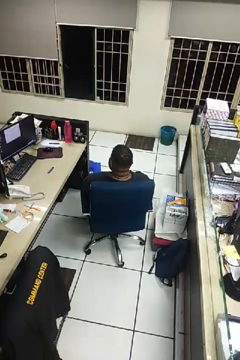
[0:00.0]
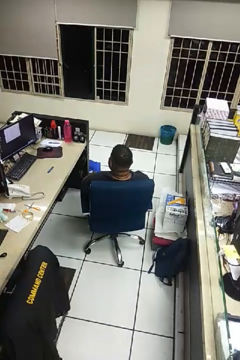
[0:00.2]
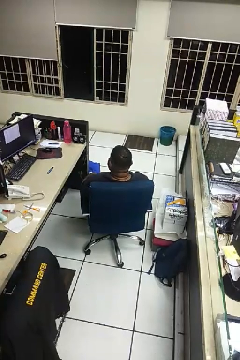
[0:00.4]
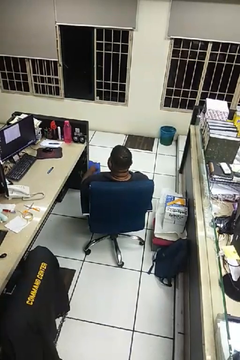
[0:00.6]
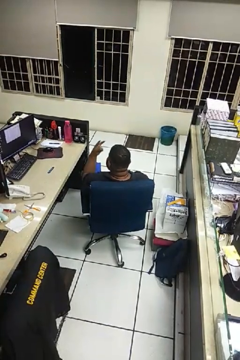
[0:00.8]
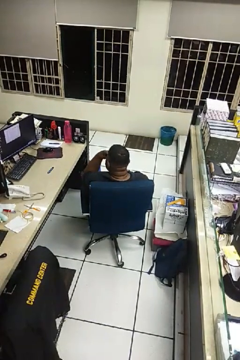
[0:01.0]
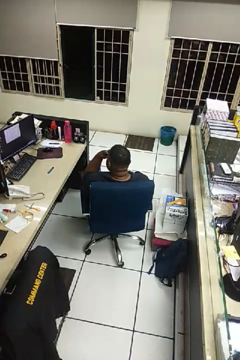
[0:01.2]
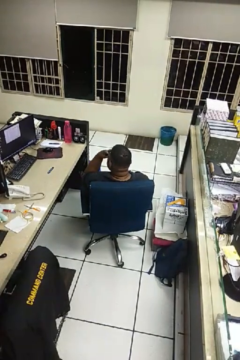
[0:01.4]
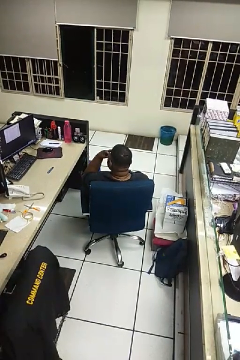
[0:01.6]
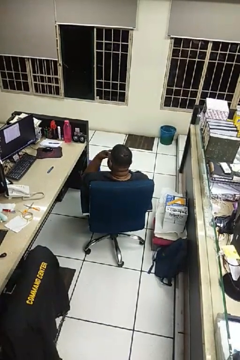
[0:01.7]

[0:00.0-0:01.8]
person gestures watch closely

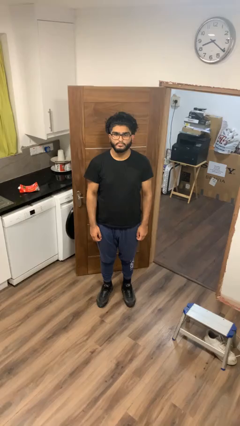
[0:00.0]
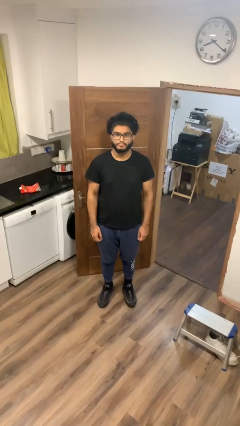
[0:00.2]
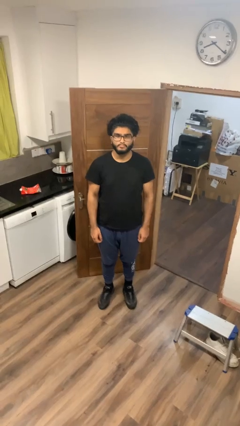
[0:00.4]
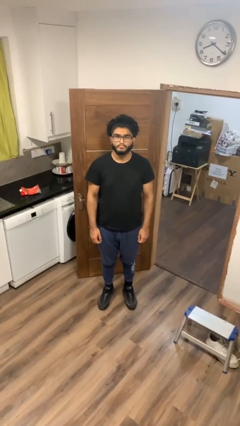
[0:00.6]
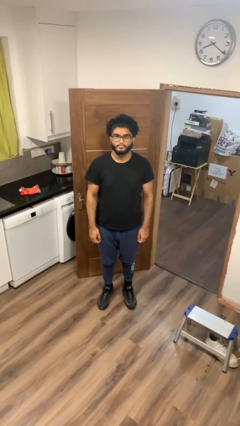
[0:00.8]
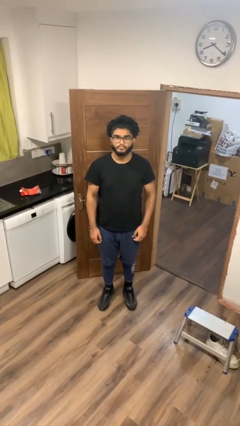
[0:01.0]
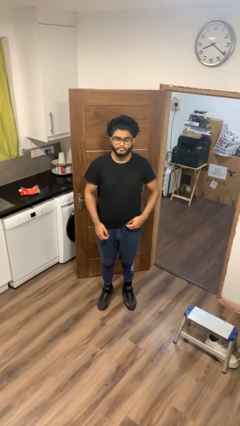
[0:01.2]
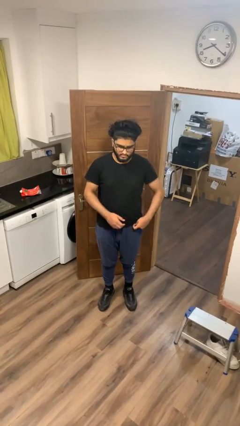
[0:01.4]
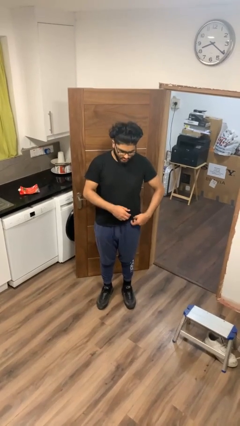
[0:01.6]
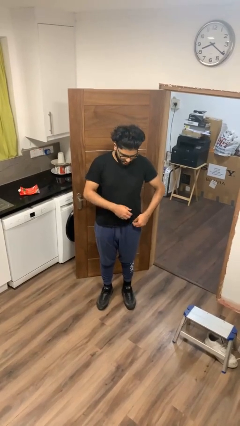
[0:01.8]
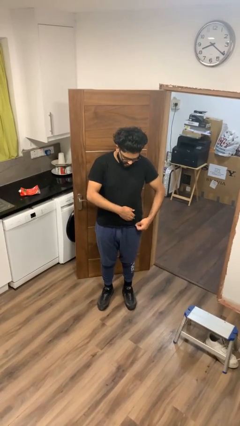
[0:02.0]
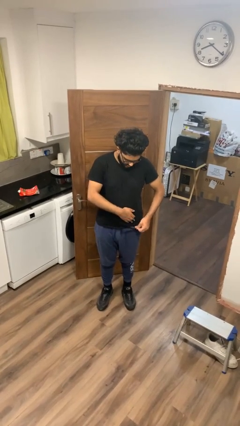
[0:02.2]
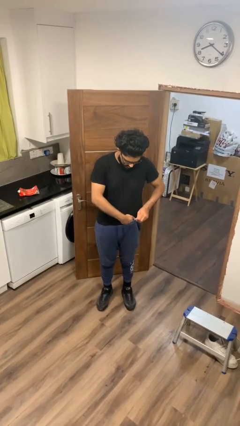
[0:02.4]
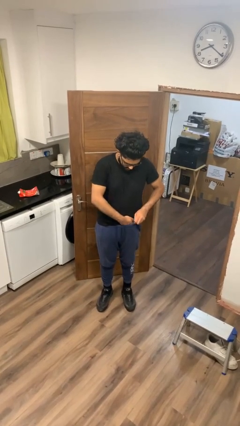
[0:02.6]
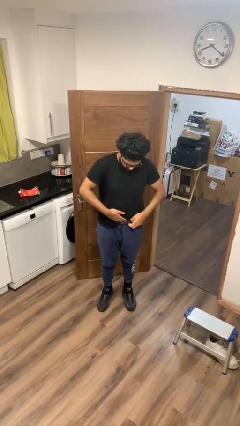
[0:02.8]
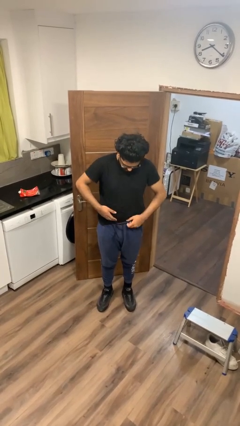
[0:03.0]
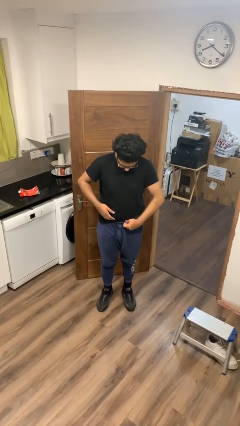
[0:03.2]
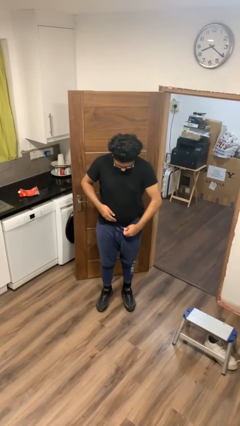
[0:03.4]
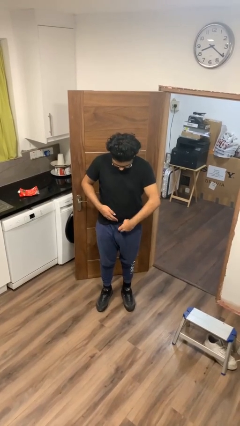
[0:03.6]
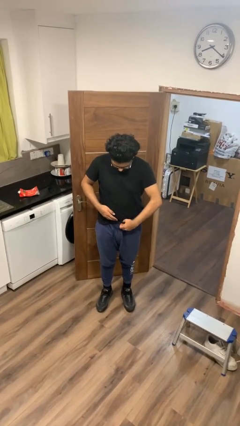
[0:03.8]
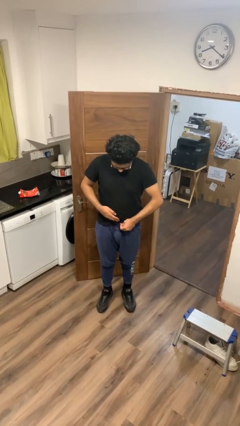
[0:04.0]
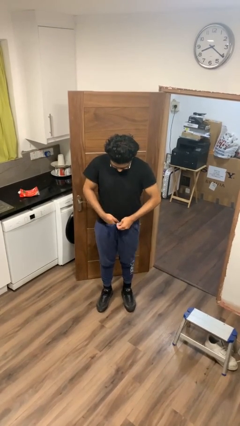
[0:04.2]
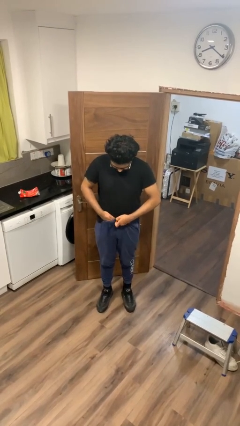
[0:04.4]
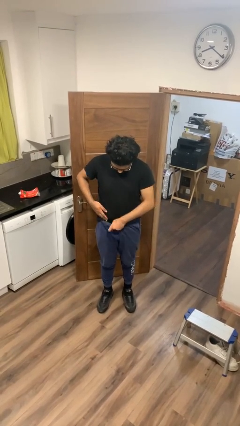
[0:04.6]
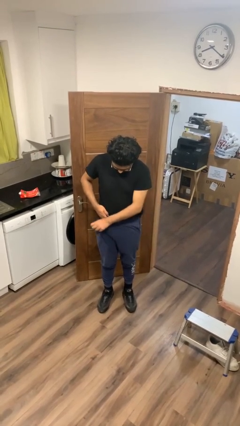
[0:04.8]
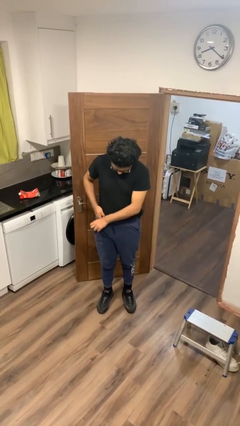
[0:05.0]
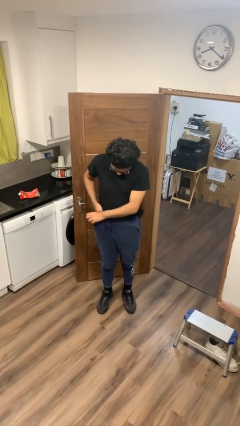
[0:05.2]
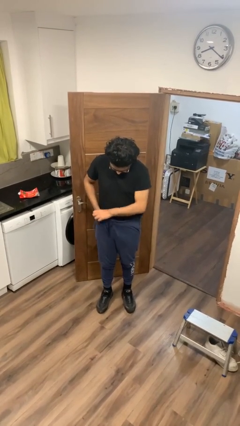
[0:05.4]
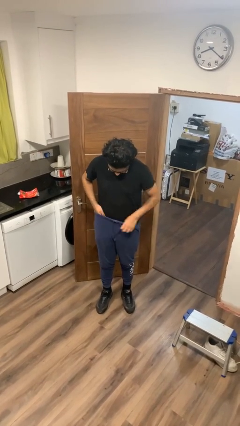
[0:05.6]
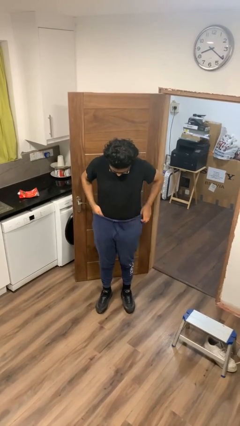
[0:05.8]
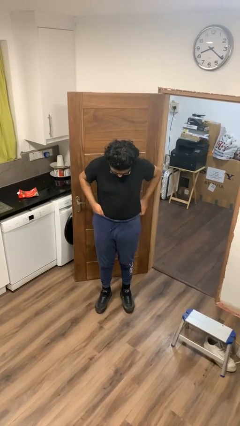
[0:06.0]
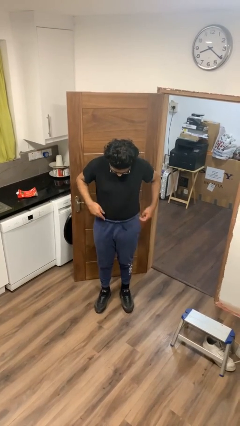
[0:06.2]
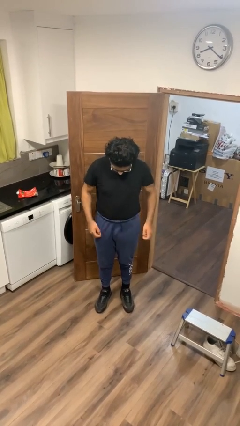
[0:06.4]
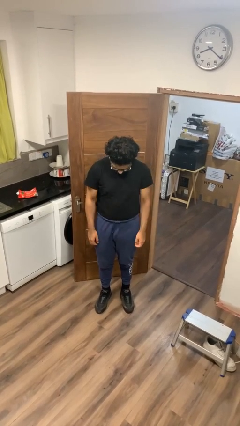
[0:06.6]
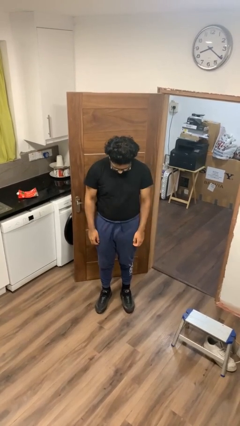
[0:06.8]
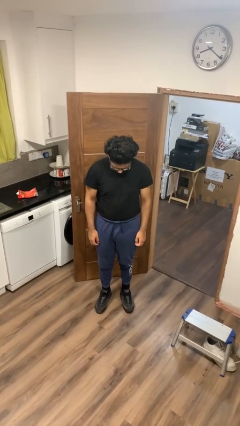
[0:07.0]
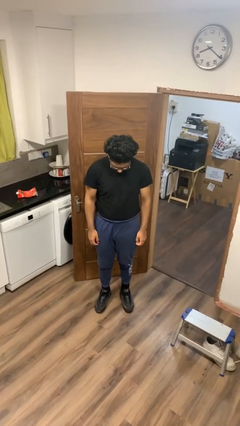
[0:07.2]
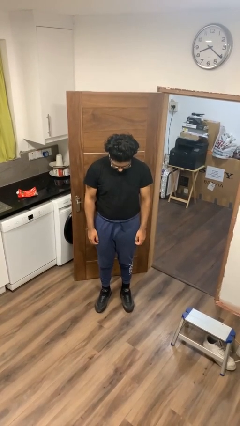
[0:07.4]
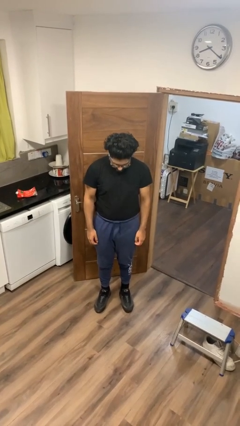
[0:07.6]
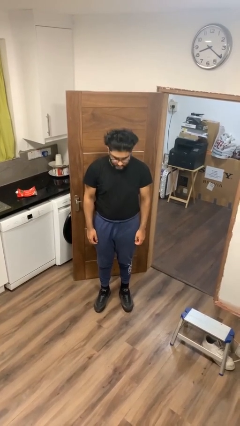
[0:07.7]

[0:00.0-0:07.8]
person tucks in shirt

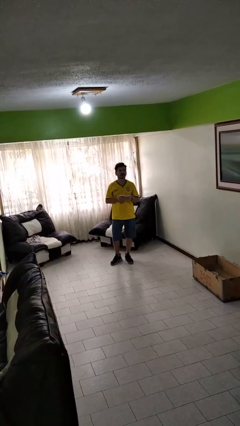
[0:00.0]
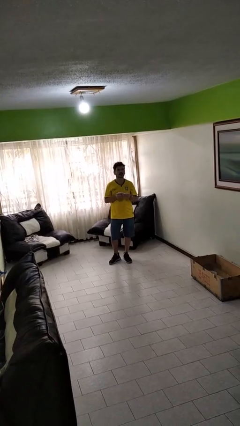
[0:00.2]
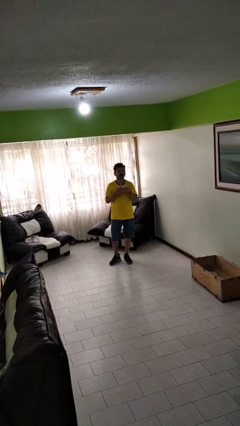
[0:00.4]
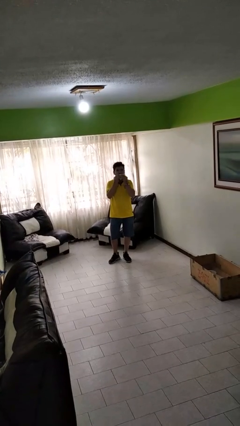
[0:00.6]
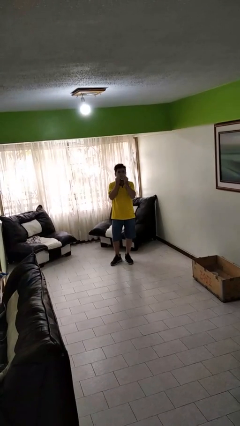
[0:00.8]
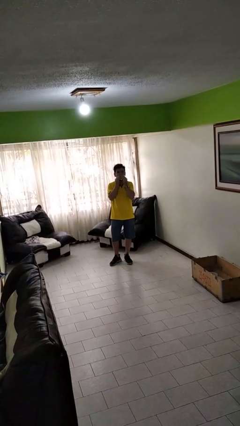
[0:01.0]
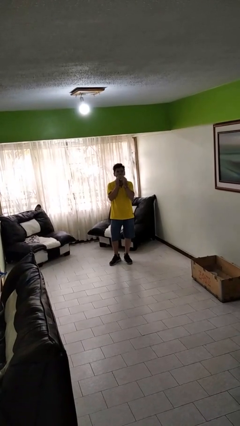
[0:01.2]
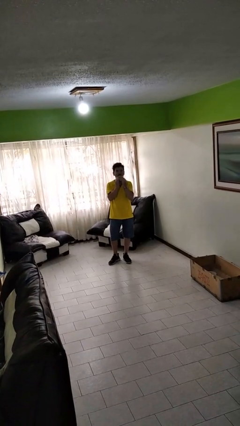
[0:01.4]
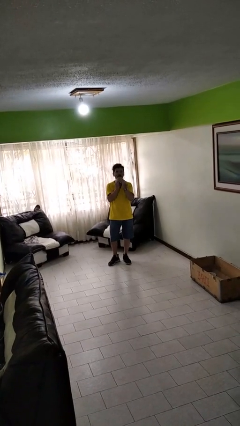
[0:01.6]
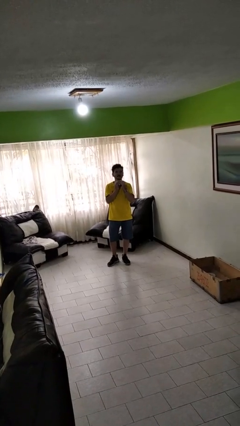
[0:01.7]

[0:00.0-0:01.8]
person wipes mouth with napkin

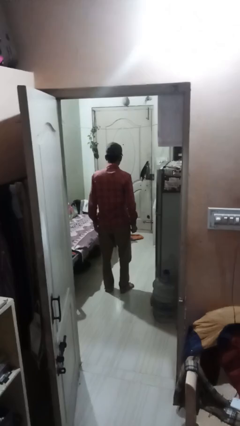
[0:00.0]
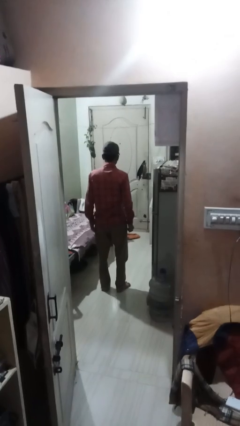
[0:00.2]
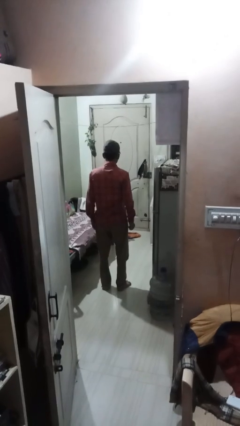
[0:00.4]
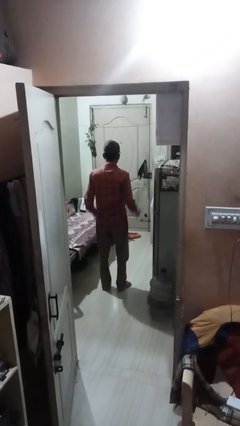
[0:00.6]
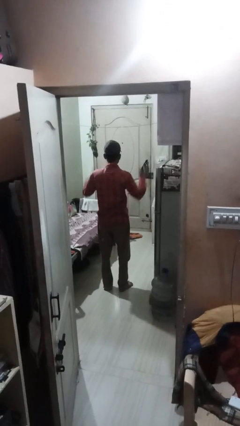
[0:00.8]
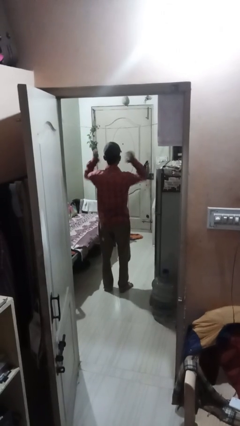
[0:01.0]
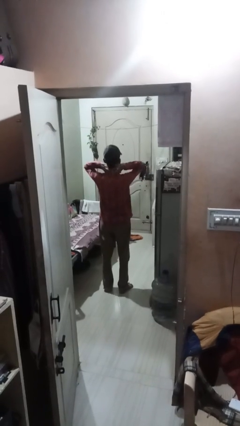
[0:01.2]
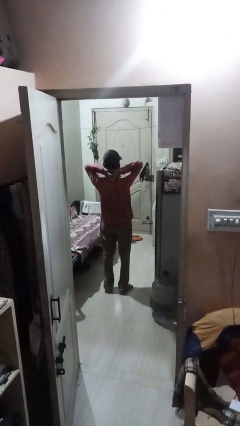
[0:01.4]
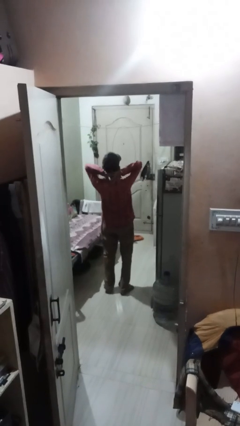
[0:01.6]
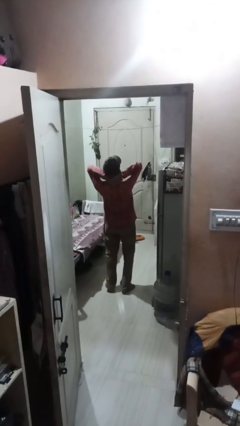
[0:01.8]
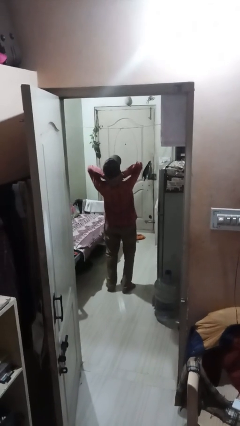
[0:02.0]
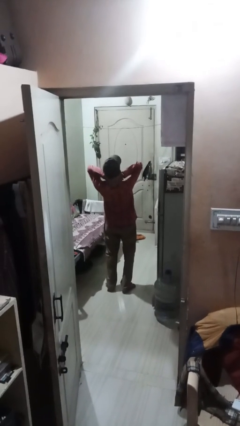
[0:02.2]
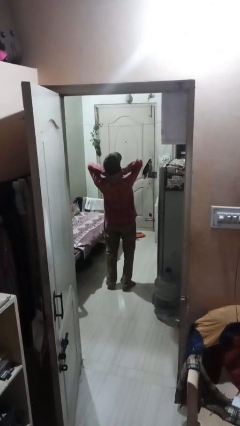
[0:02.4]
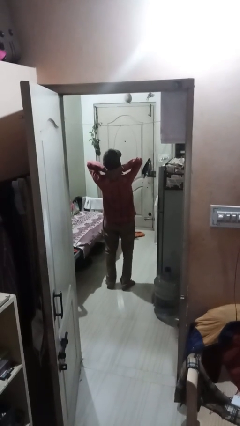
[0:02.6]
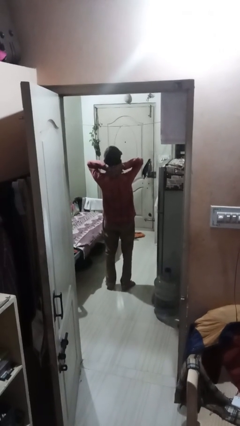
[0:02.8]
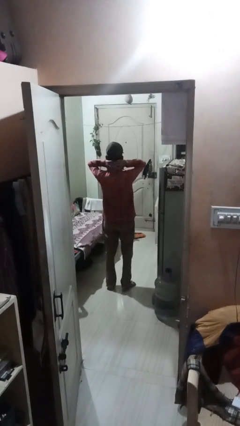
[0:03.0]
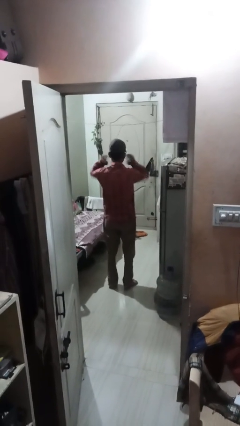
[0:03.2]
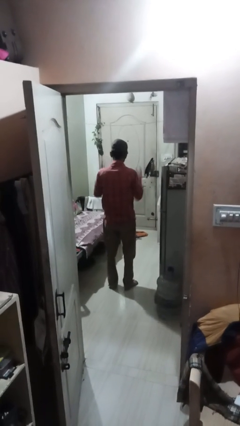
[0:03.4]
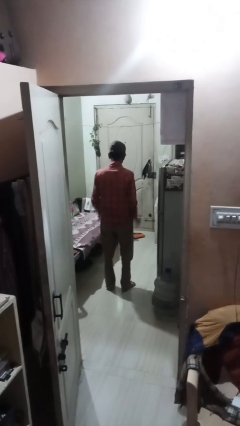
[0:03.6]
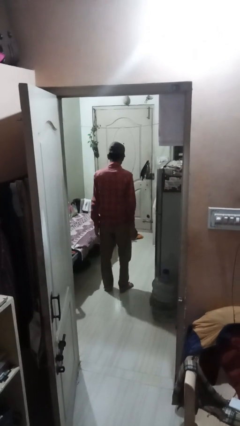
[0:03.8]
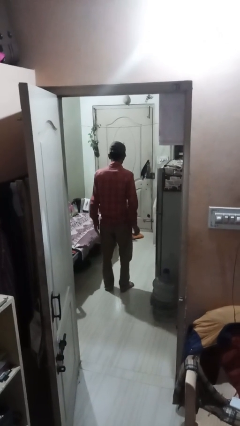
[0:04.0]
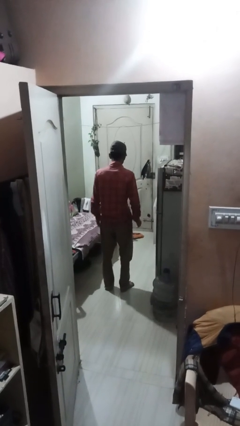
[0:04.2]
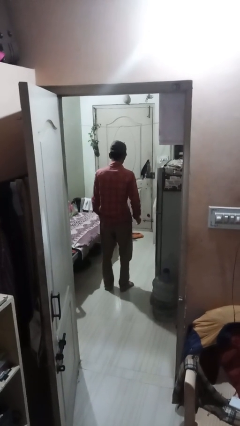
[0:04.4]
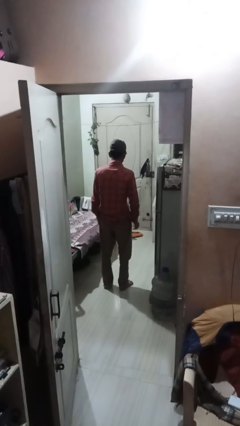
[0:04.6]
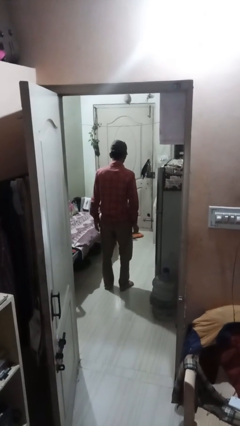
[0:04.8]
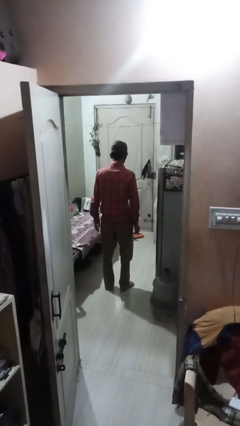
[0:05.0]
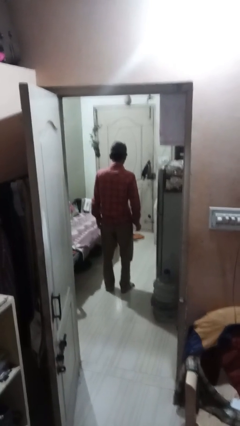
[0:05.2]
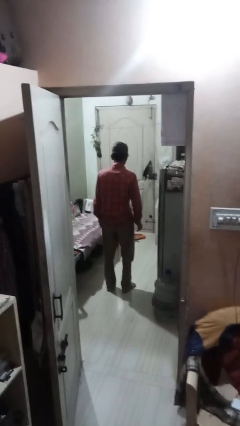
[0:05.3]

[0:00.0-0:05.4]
person stretches arms over head

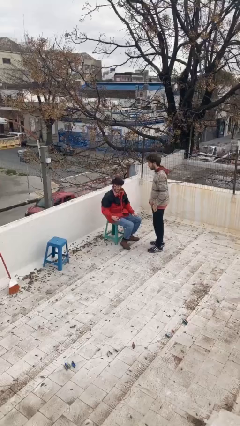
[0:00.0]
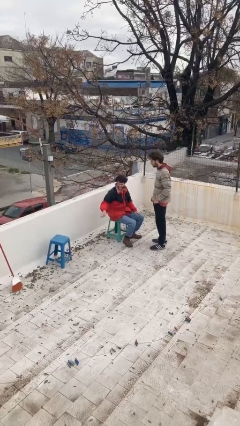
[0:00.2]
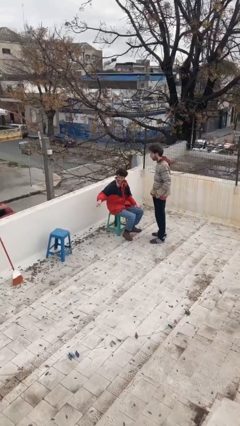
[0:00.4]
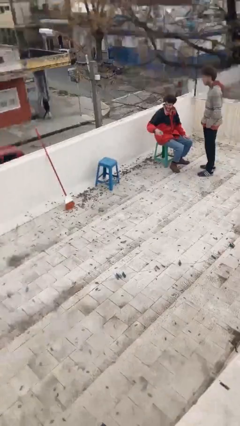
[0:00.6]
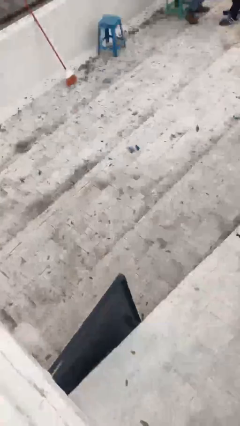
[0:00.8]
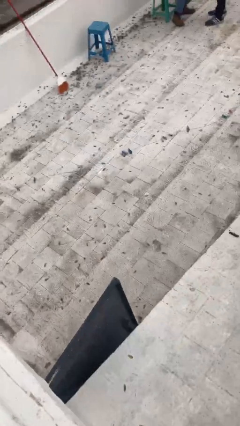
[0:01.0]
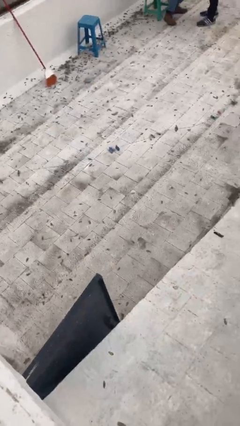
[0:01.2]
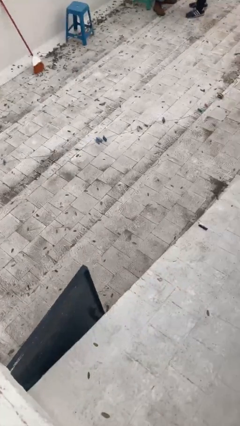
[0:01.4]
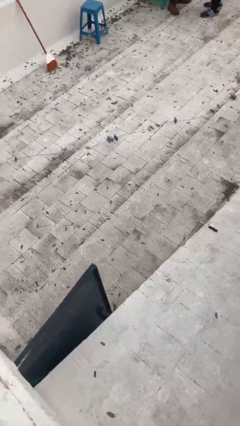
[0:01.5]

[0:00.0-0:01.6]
person embraces person
